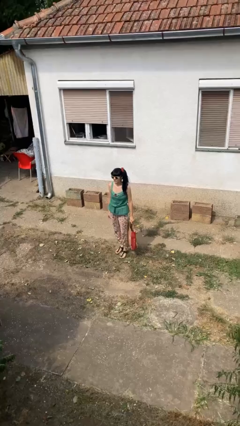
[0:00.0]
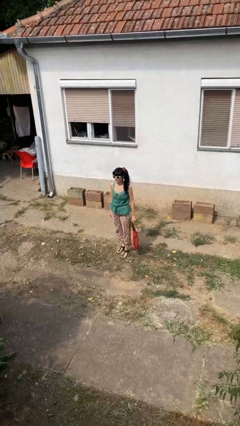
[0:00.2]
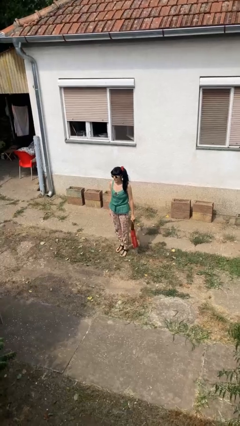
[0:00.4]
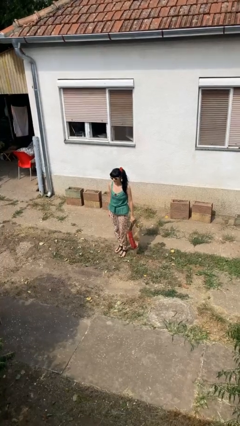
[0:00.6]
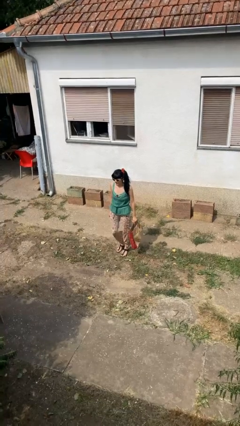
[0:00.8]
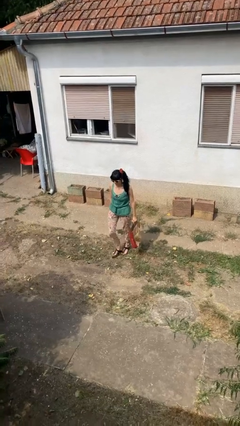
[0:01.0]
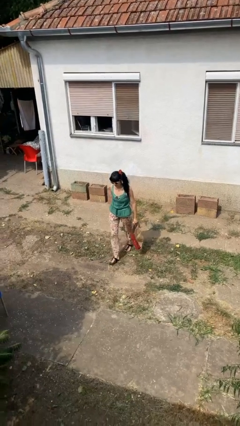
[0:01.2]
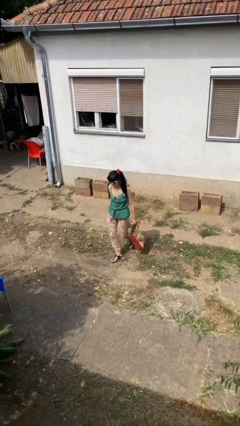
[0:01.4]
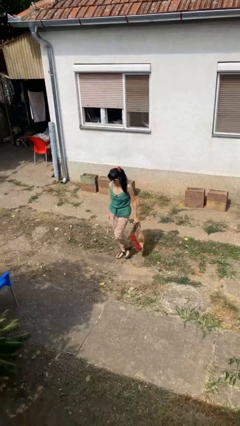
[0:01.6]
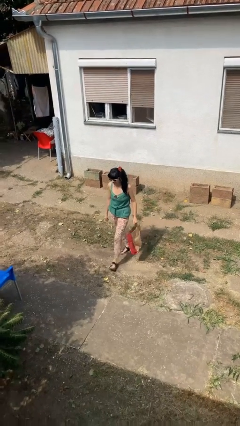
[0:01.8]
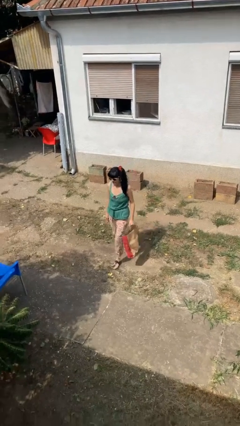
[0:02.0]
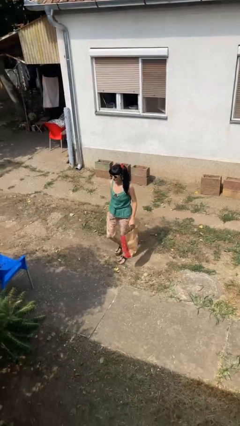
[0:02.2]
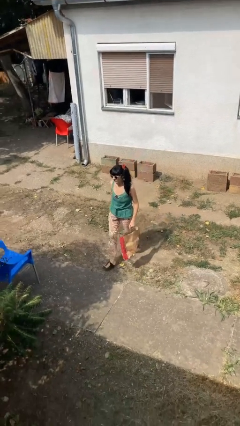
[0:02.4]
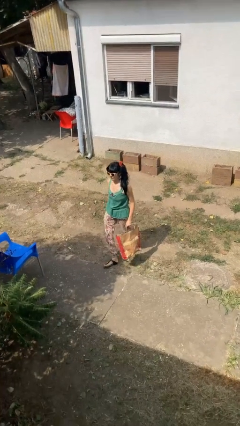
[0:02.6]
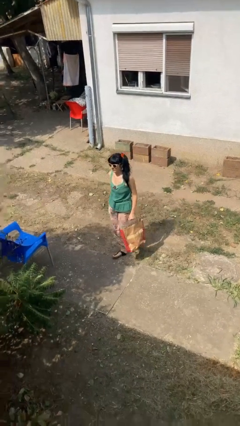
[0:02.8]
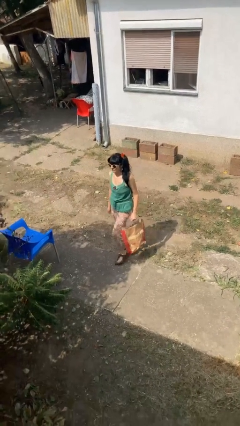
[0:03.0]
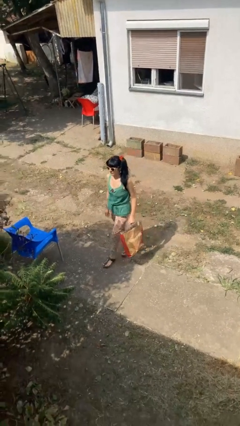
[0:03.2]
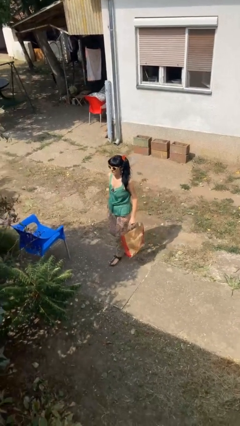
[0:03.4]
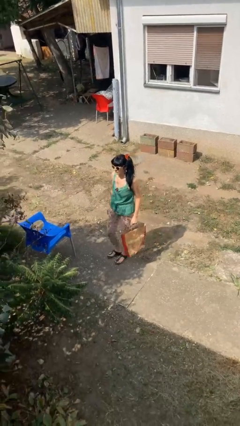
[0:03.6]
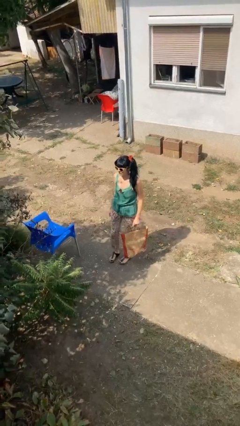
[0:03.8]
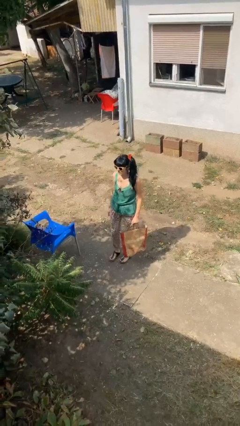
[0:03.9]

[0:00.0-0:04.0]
person carries groceries

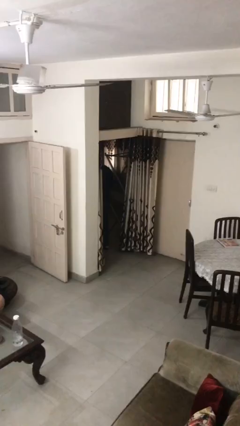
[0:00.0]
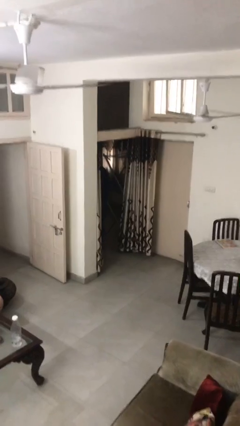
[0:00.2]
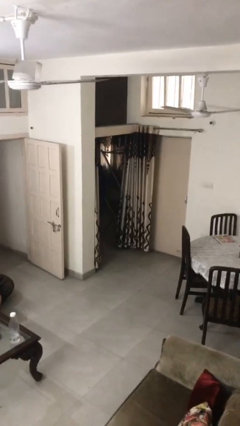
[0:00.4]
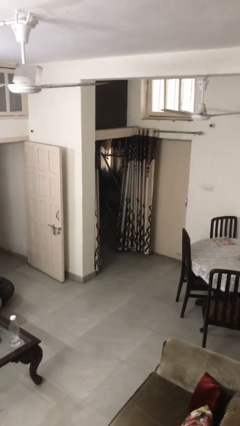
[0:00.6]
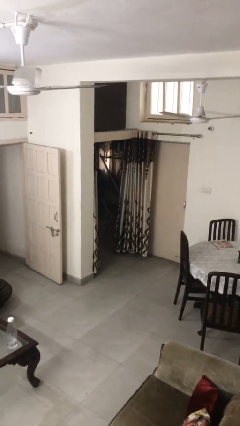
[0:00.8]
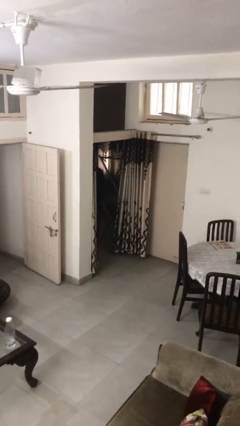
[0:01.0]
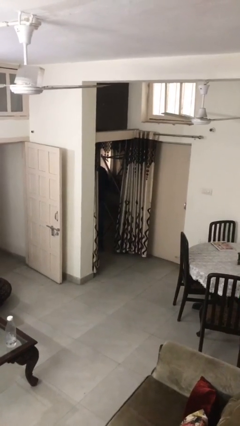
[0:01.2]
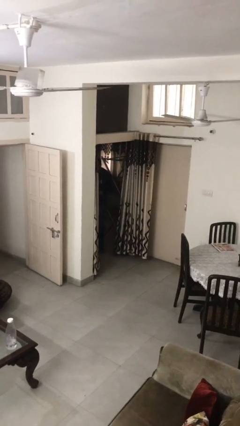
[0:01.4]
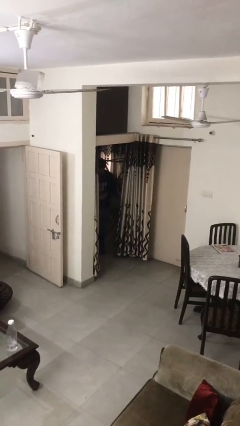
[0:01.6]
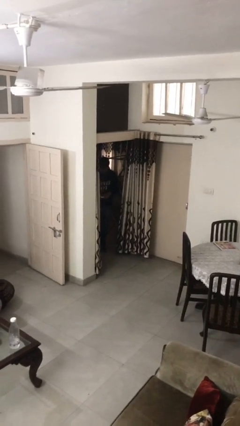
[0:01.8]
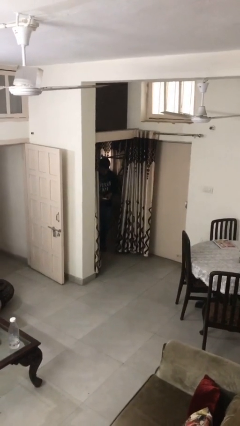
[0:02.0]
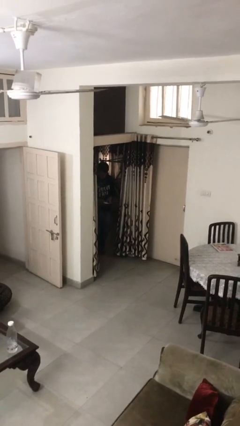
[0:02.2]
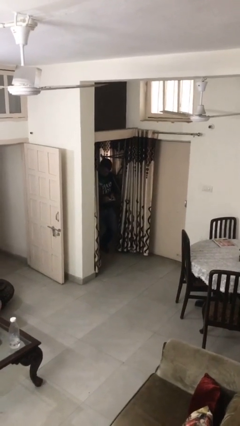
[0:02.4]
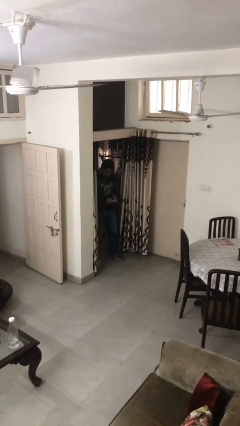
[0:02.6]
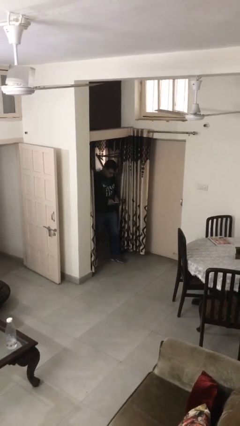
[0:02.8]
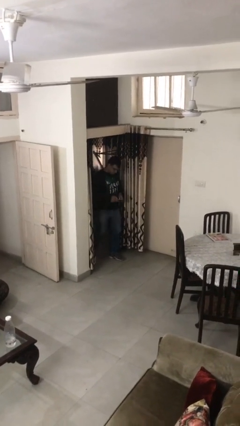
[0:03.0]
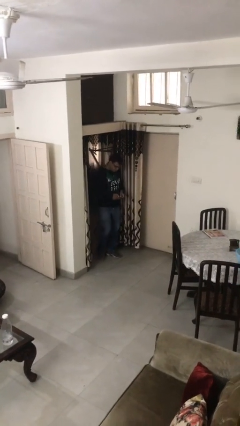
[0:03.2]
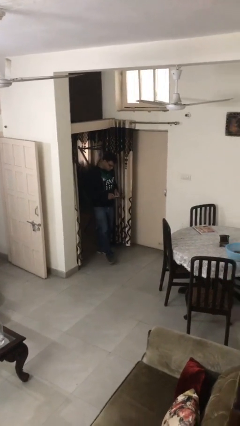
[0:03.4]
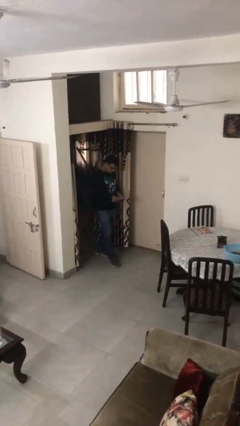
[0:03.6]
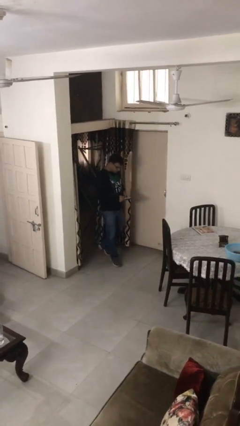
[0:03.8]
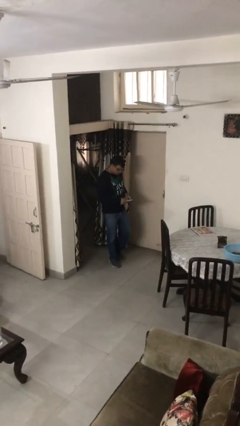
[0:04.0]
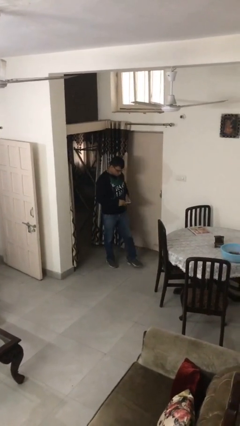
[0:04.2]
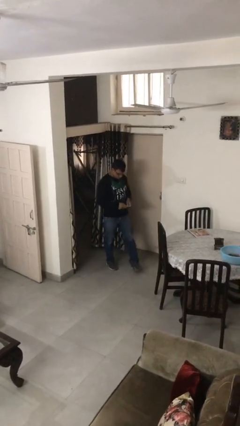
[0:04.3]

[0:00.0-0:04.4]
person enters scene through structure

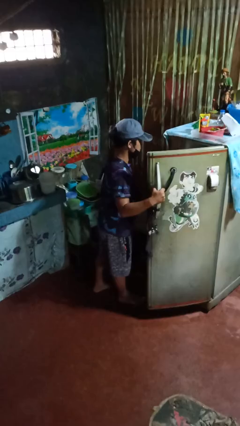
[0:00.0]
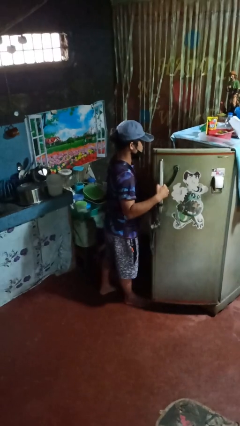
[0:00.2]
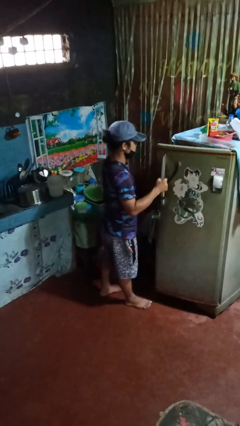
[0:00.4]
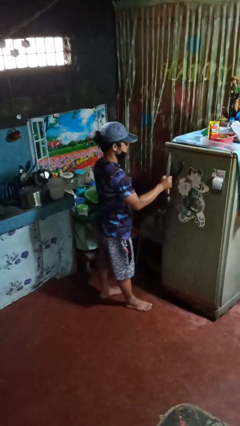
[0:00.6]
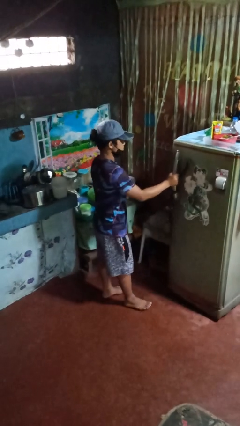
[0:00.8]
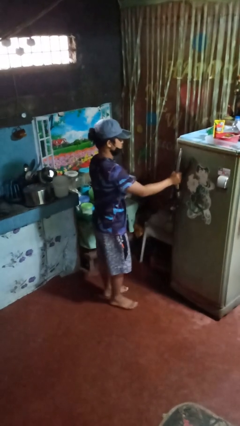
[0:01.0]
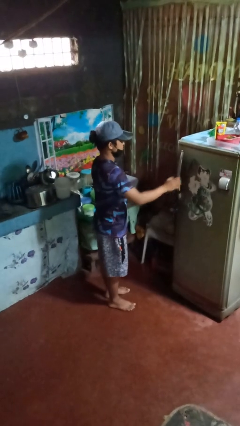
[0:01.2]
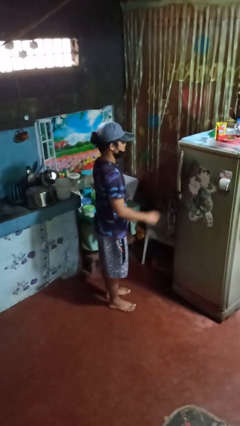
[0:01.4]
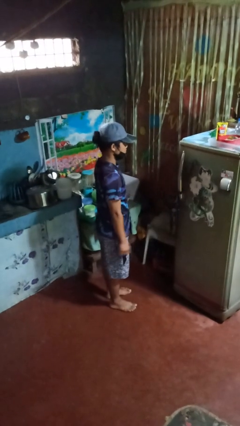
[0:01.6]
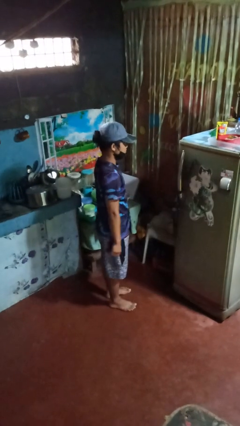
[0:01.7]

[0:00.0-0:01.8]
person closes refrigerator

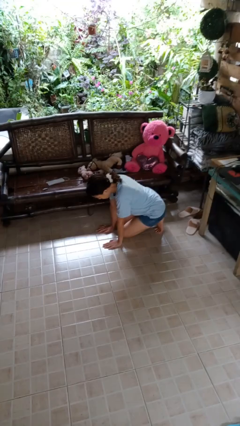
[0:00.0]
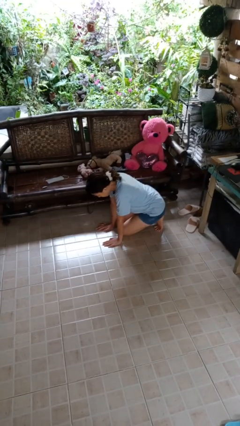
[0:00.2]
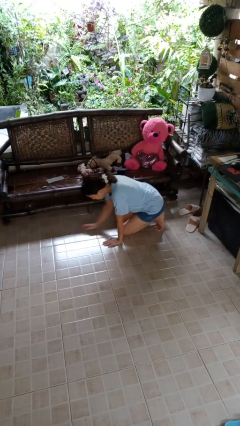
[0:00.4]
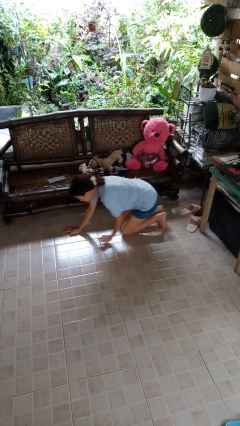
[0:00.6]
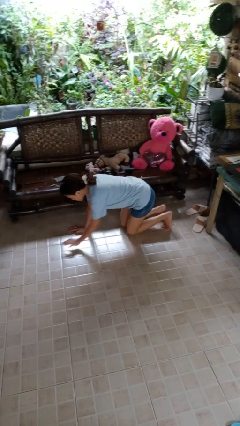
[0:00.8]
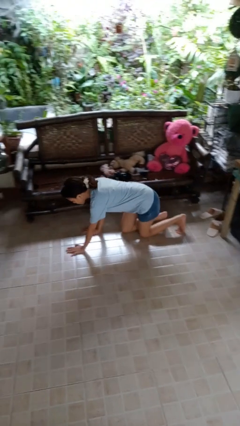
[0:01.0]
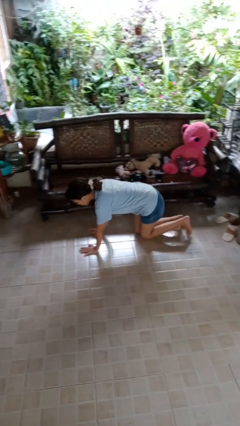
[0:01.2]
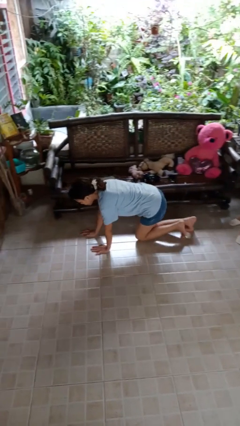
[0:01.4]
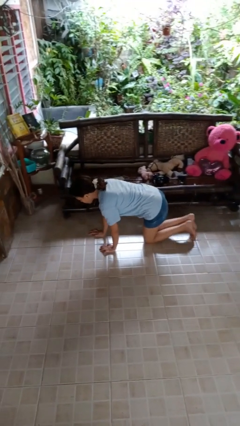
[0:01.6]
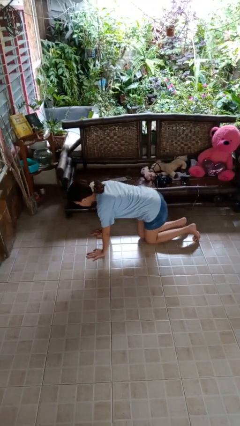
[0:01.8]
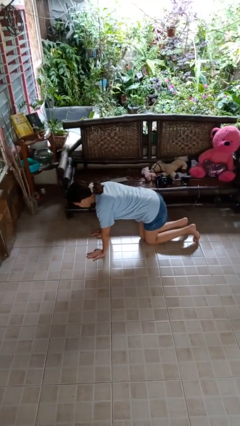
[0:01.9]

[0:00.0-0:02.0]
person crawls

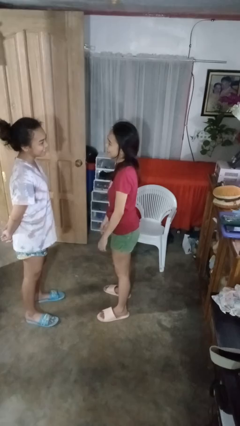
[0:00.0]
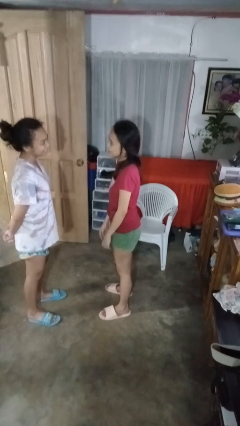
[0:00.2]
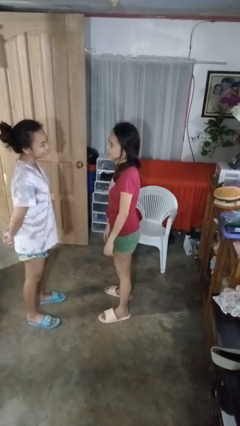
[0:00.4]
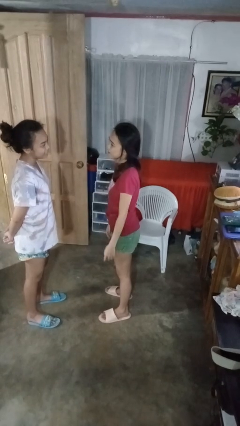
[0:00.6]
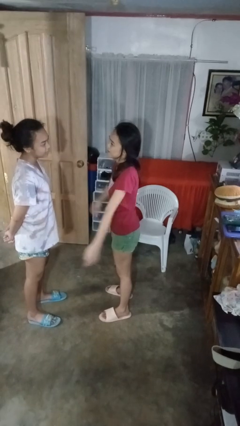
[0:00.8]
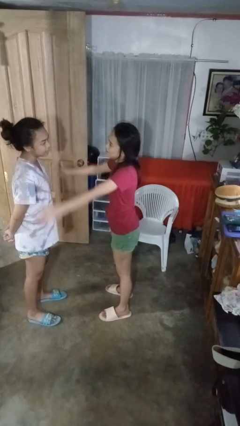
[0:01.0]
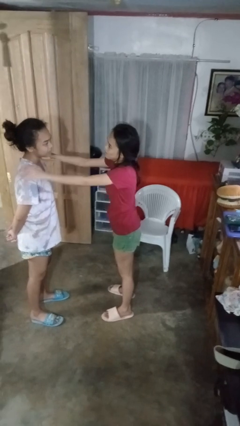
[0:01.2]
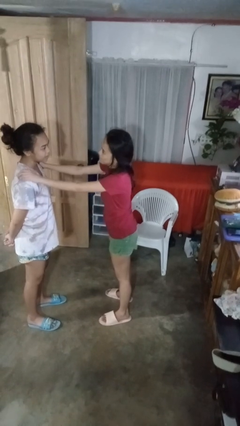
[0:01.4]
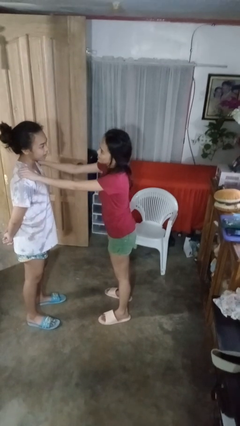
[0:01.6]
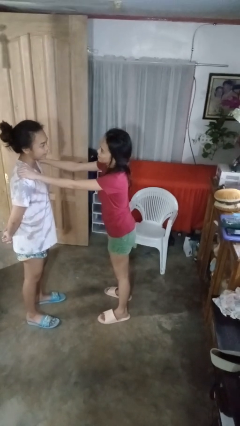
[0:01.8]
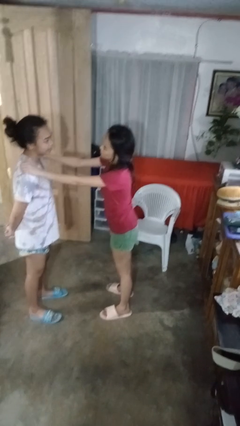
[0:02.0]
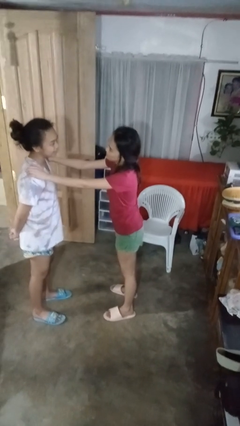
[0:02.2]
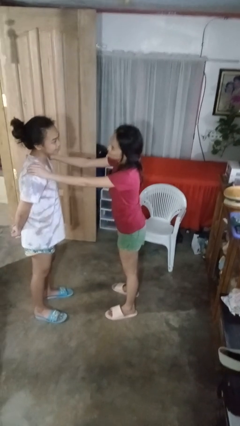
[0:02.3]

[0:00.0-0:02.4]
person pounds shoulders of person

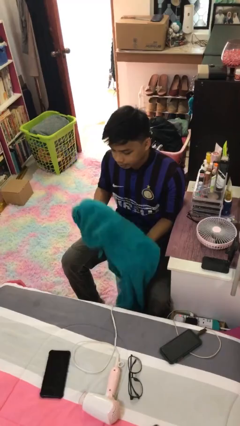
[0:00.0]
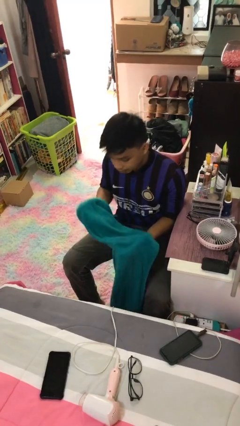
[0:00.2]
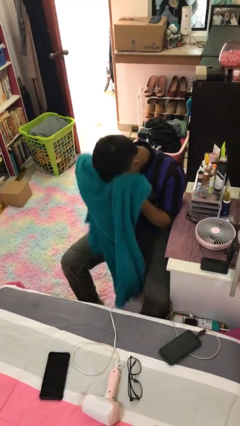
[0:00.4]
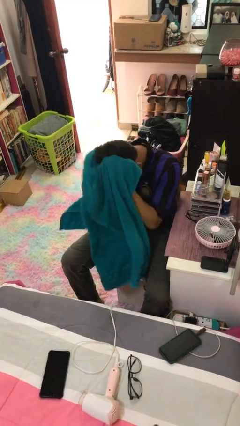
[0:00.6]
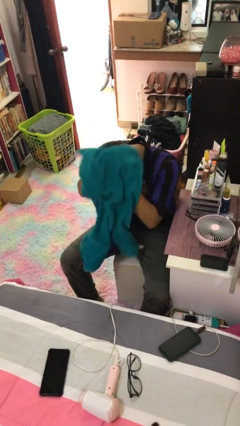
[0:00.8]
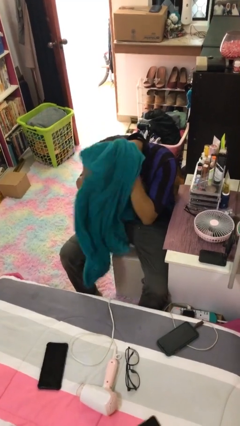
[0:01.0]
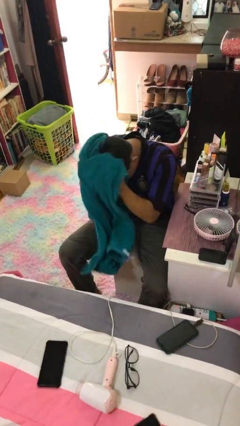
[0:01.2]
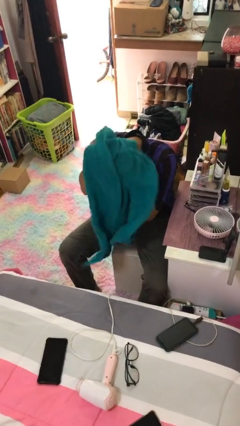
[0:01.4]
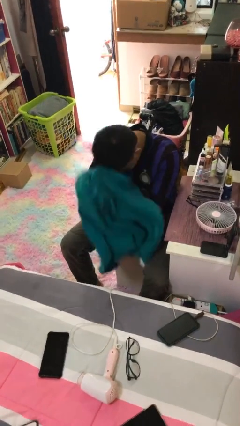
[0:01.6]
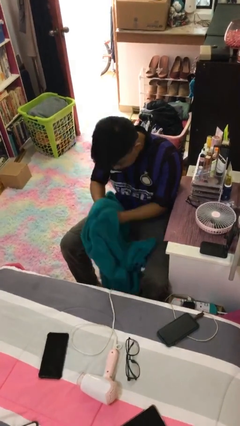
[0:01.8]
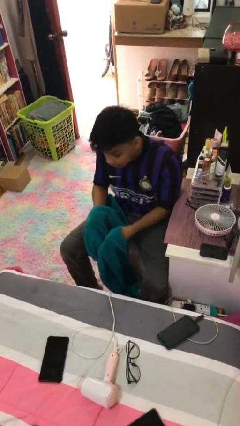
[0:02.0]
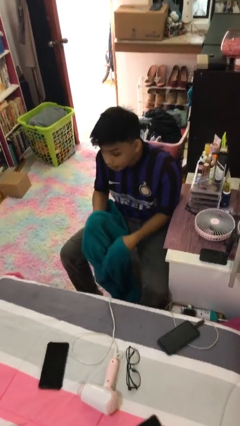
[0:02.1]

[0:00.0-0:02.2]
person dries hair with towel

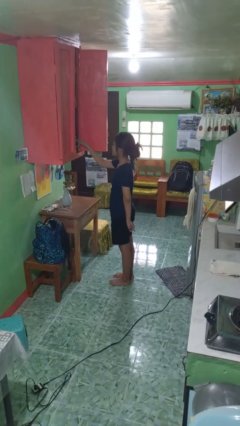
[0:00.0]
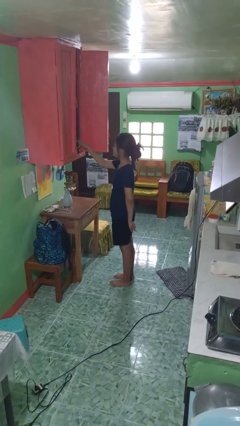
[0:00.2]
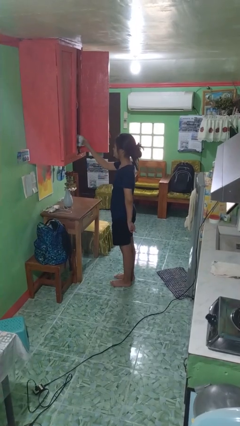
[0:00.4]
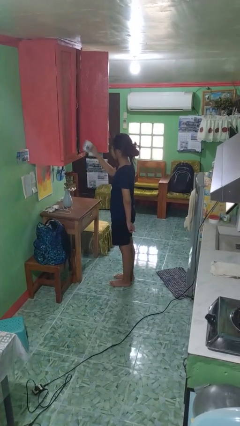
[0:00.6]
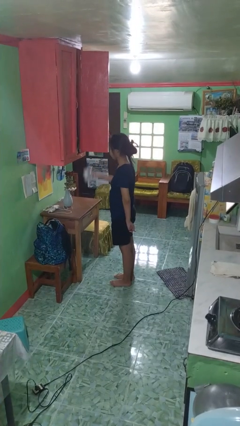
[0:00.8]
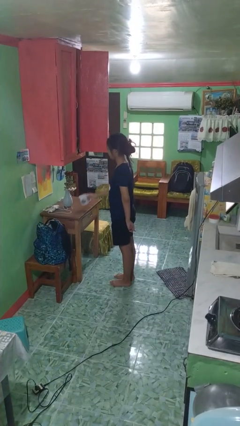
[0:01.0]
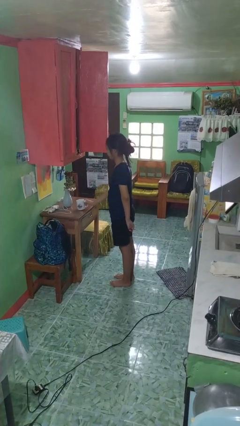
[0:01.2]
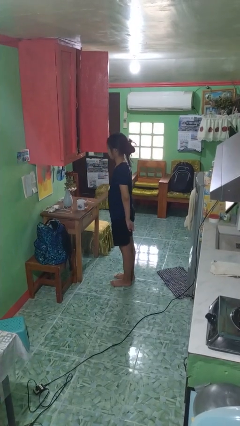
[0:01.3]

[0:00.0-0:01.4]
person takes object from cabinet
